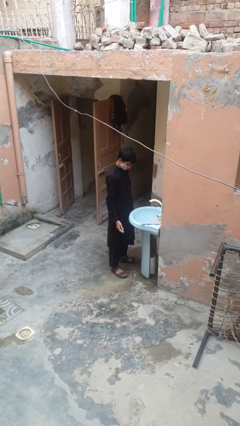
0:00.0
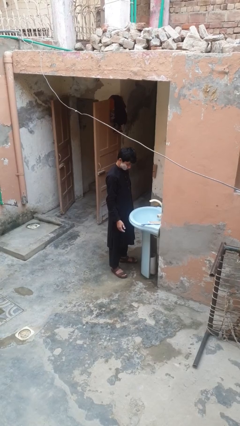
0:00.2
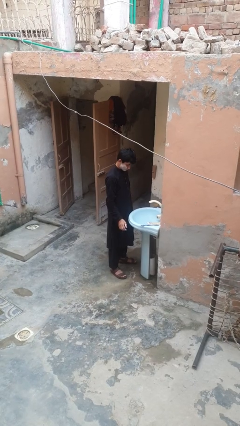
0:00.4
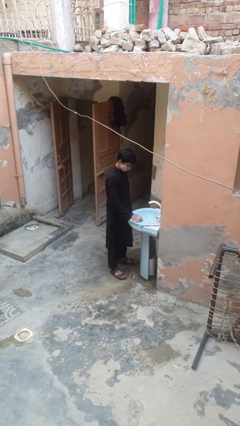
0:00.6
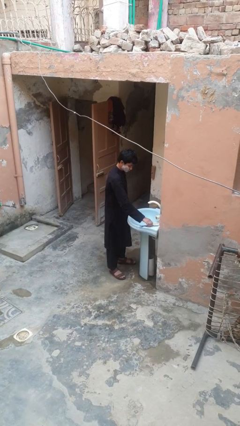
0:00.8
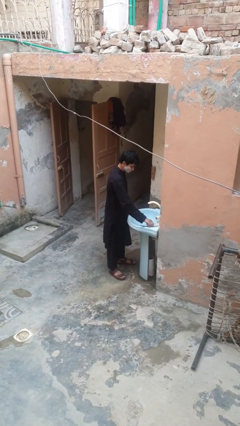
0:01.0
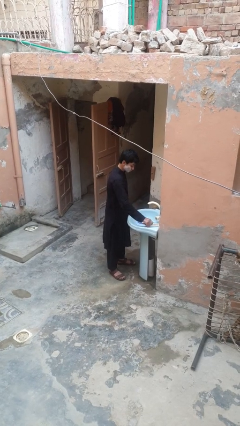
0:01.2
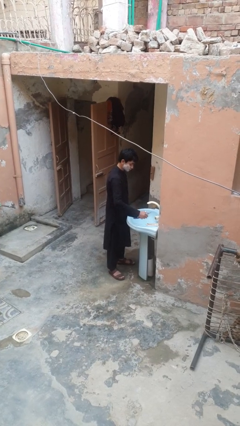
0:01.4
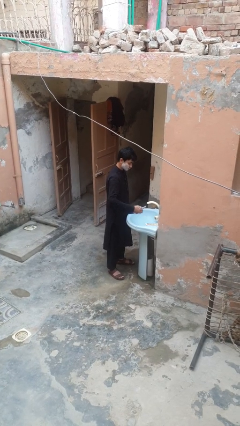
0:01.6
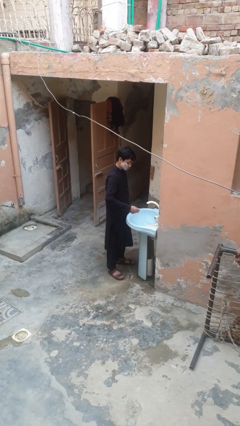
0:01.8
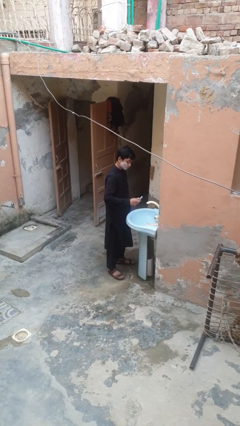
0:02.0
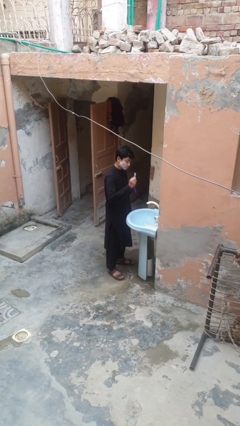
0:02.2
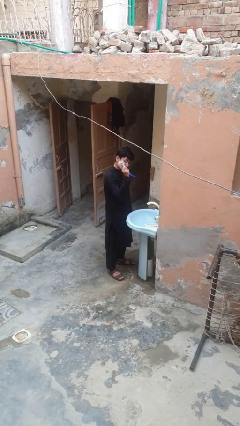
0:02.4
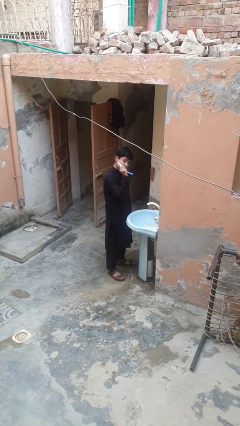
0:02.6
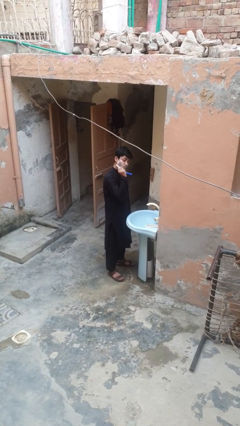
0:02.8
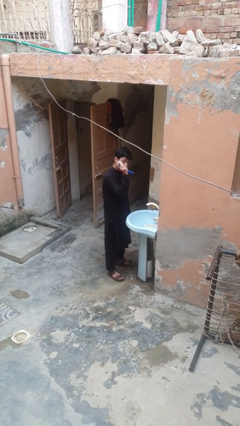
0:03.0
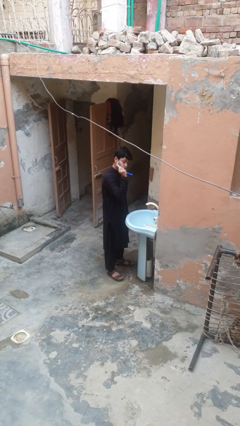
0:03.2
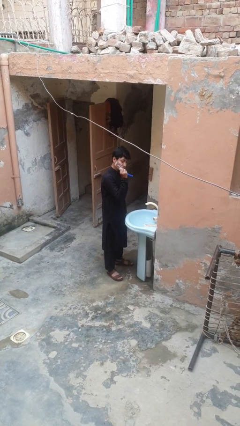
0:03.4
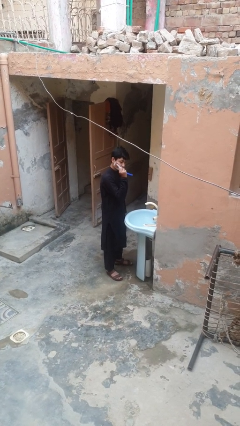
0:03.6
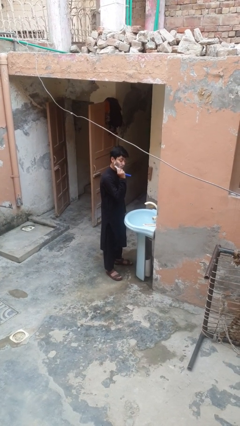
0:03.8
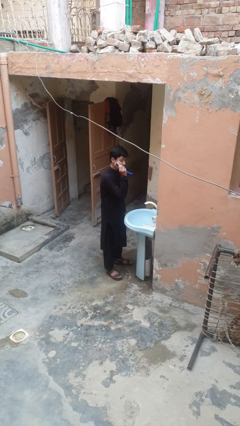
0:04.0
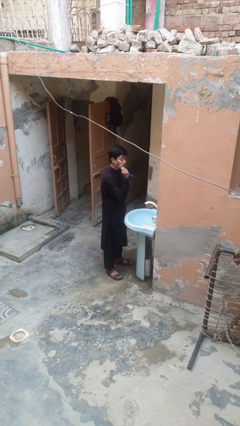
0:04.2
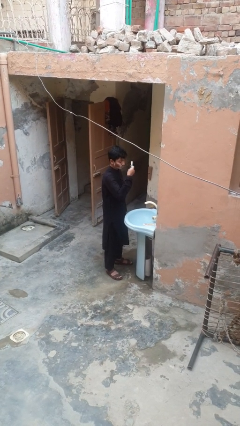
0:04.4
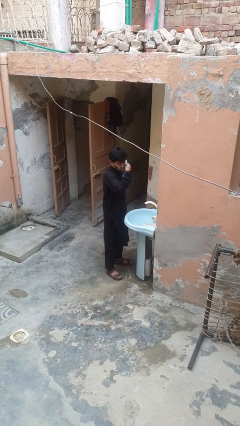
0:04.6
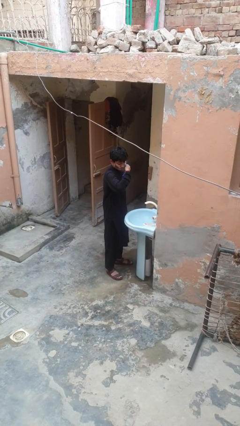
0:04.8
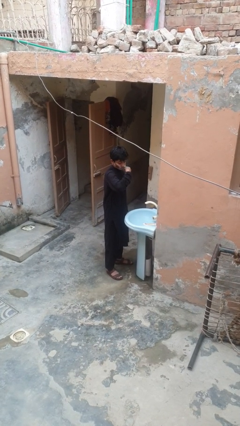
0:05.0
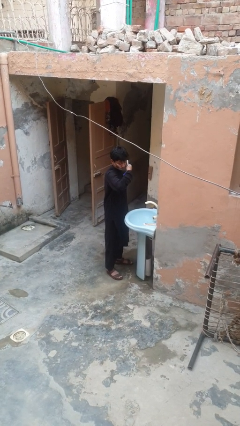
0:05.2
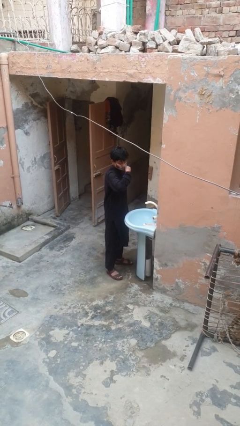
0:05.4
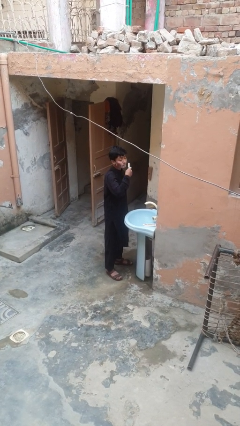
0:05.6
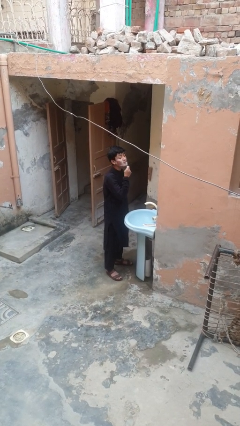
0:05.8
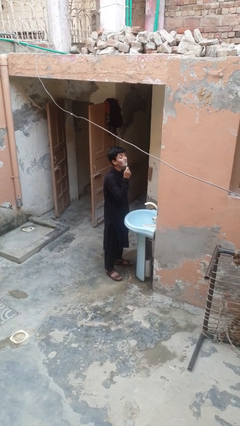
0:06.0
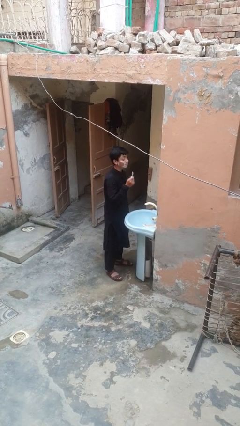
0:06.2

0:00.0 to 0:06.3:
person shaves face

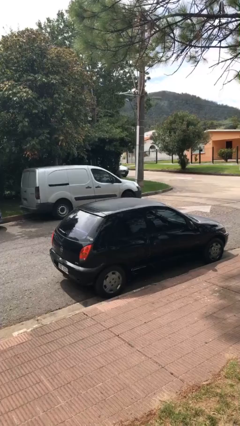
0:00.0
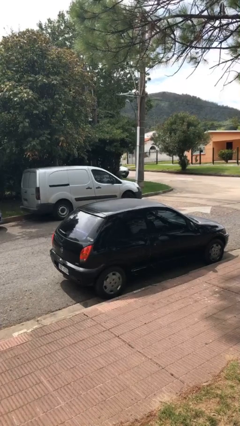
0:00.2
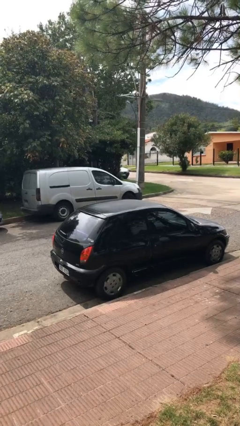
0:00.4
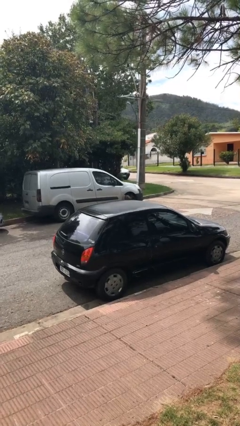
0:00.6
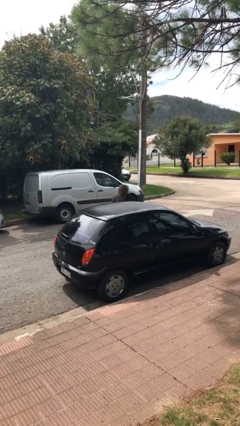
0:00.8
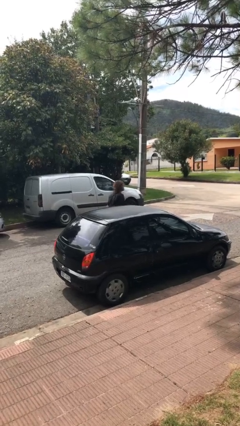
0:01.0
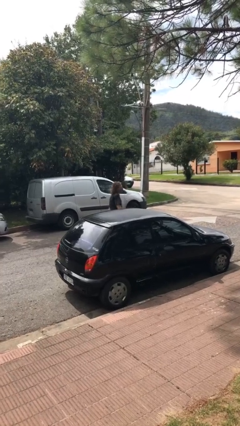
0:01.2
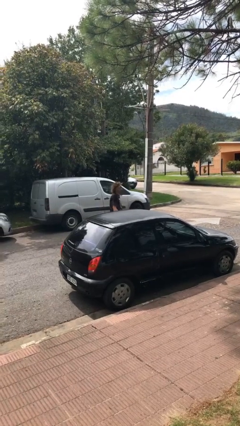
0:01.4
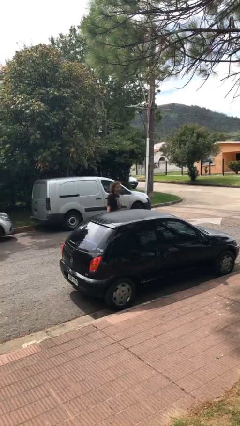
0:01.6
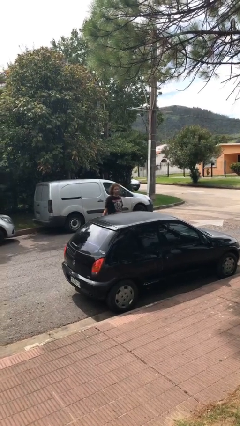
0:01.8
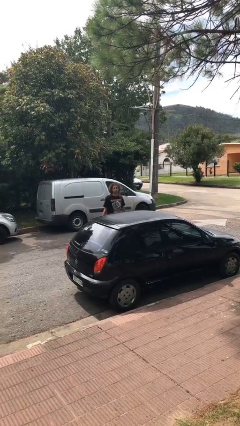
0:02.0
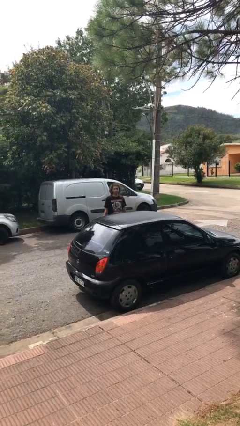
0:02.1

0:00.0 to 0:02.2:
person exits car

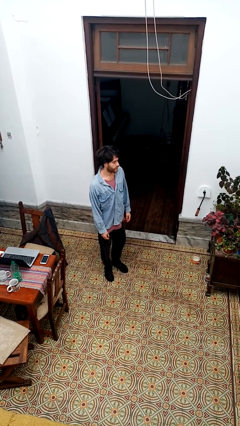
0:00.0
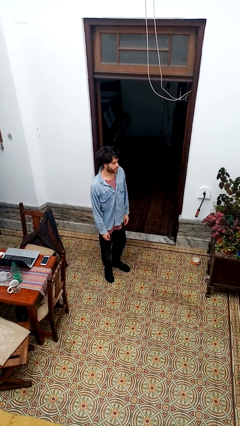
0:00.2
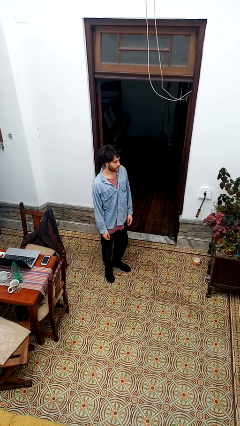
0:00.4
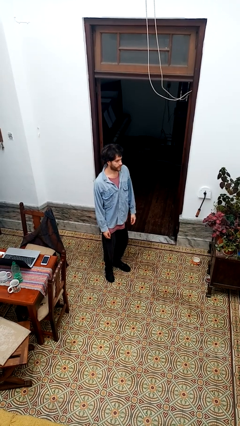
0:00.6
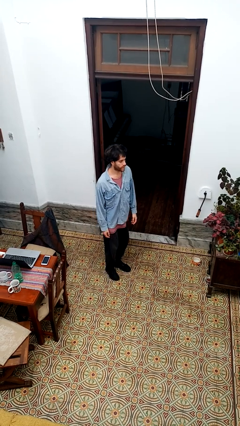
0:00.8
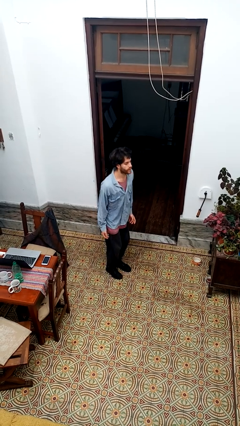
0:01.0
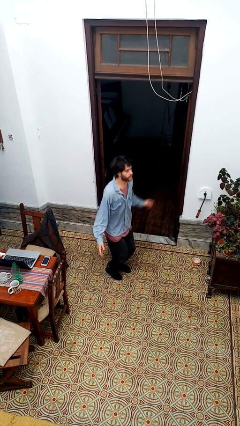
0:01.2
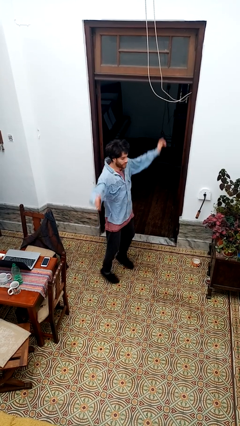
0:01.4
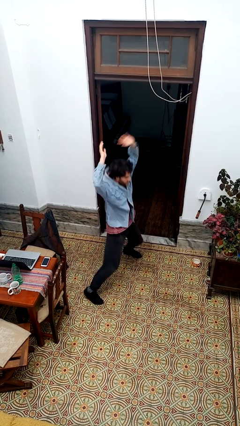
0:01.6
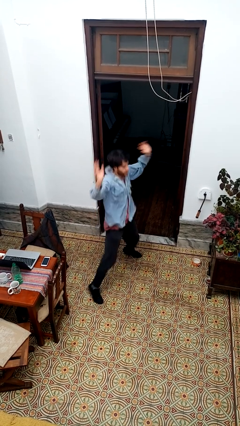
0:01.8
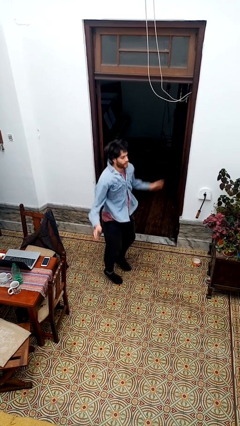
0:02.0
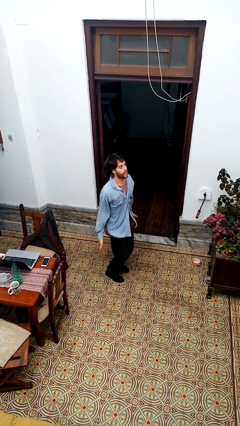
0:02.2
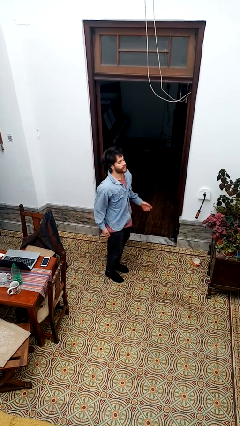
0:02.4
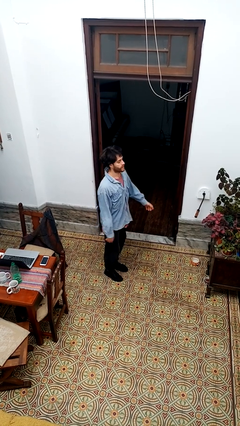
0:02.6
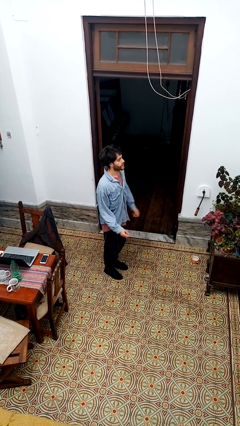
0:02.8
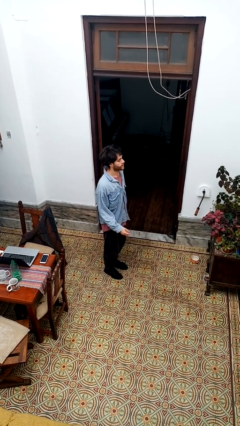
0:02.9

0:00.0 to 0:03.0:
person exercises with jumping jacks

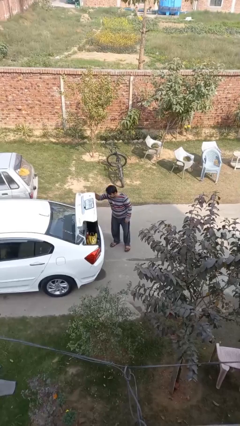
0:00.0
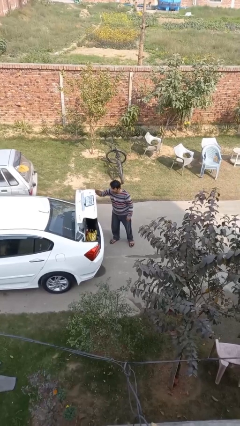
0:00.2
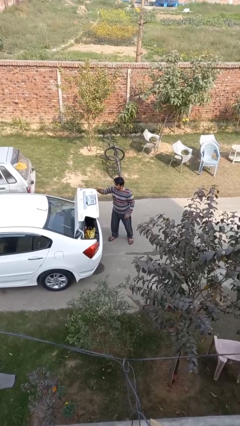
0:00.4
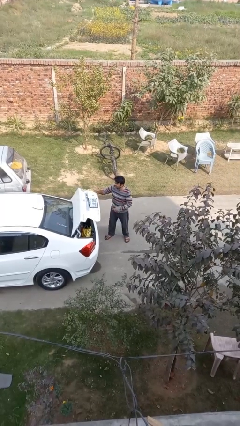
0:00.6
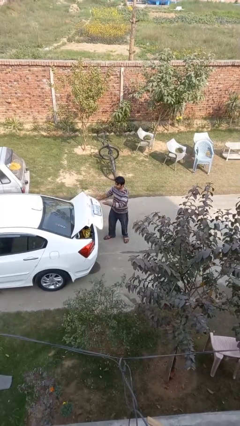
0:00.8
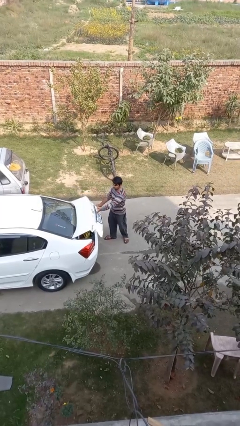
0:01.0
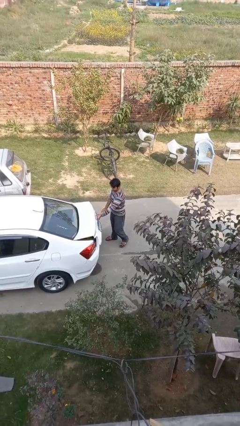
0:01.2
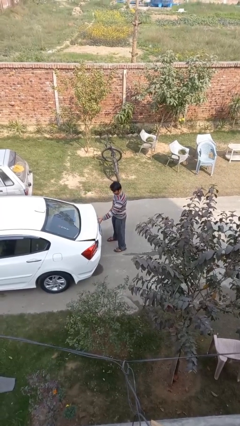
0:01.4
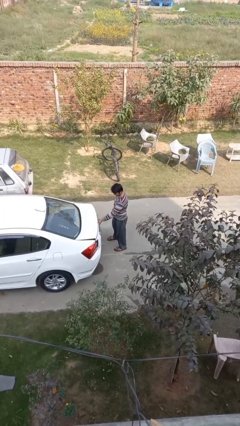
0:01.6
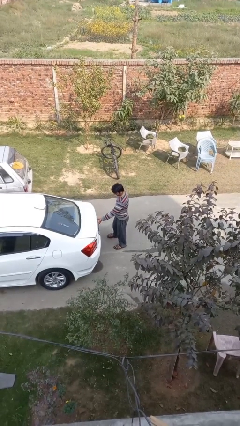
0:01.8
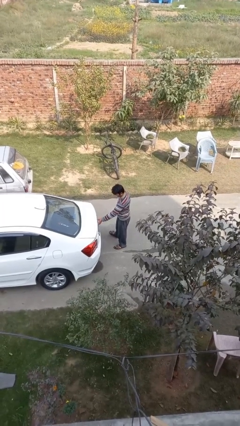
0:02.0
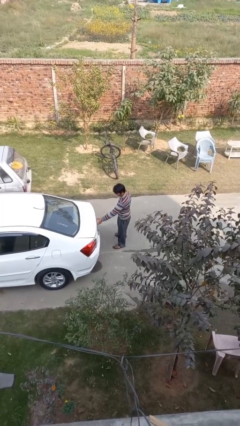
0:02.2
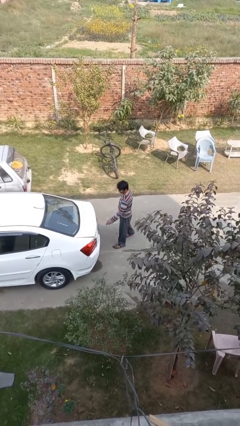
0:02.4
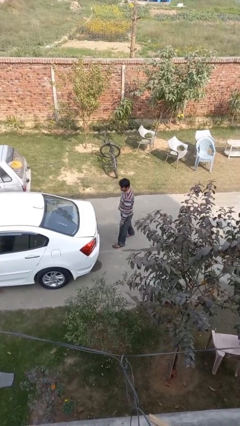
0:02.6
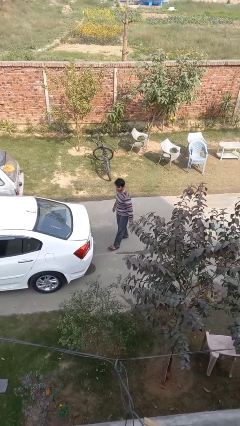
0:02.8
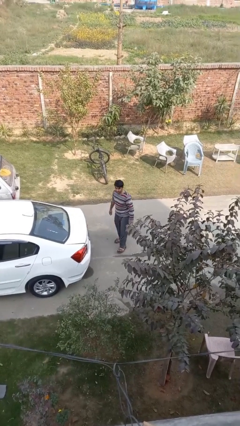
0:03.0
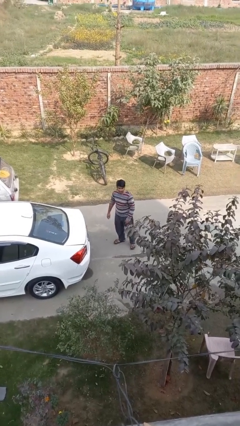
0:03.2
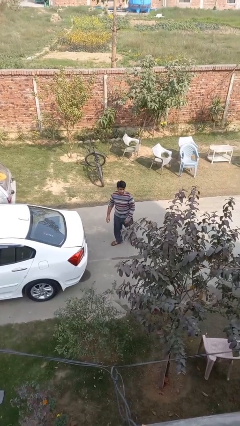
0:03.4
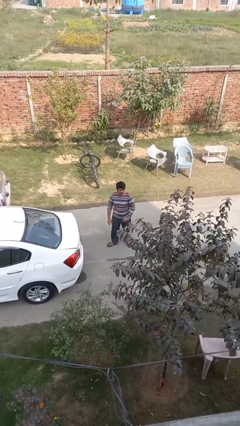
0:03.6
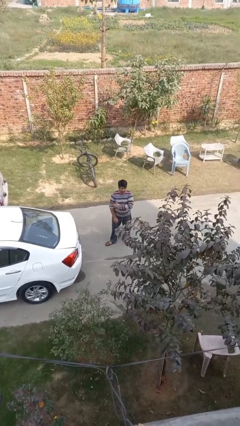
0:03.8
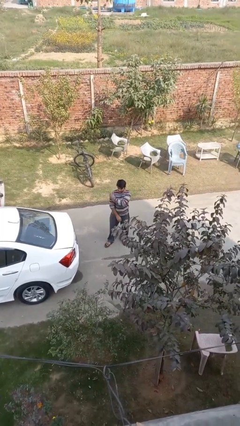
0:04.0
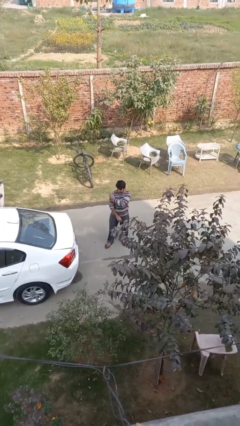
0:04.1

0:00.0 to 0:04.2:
person closes car trunk

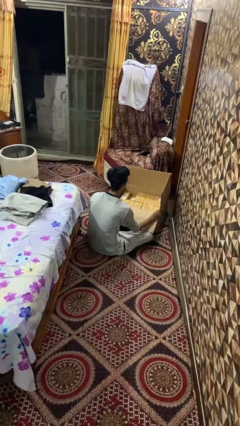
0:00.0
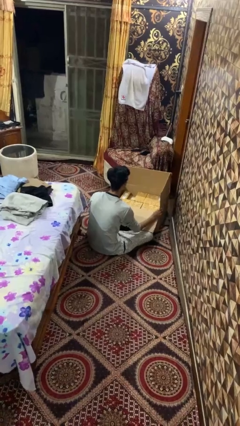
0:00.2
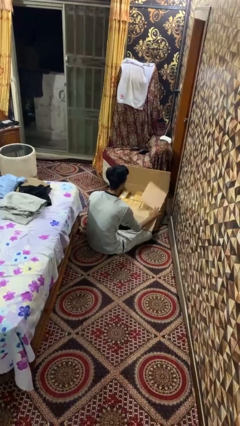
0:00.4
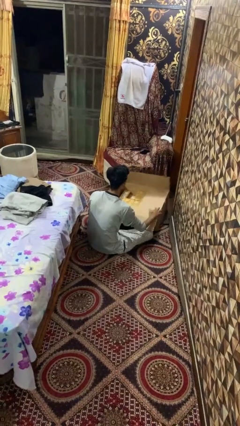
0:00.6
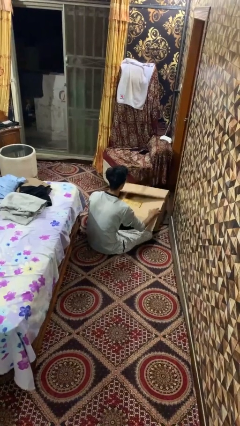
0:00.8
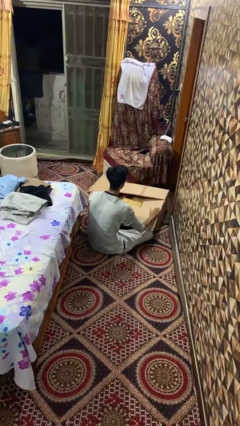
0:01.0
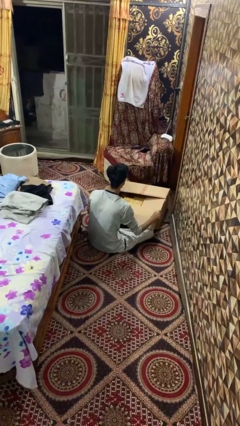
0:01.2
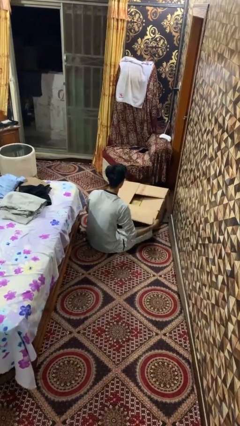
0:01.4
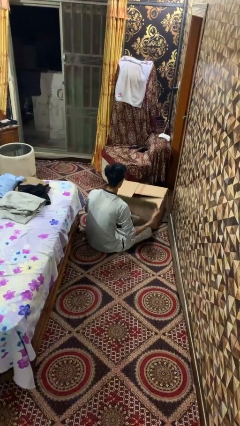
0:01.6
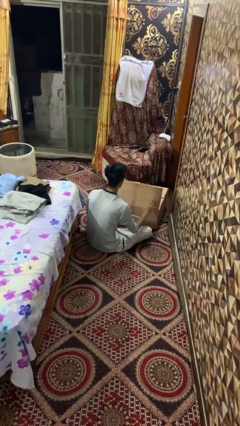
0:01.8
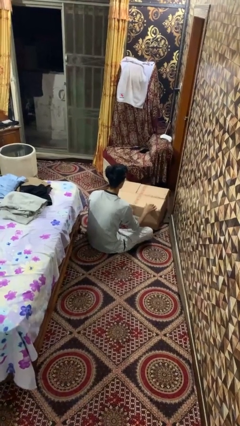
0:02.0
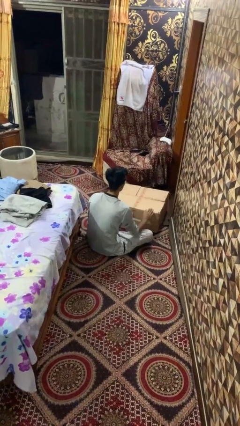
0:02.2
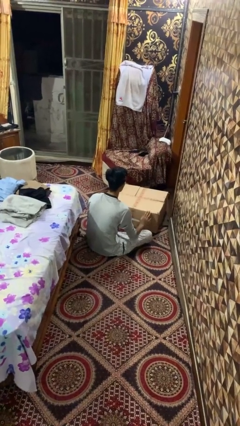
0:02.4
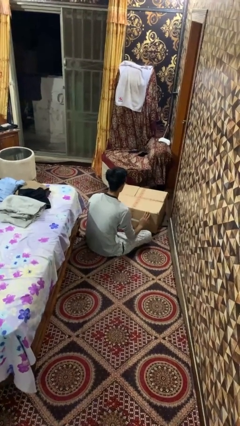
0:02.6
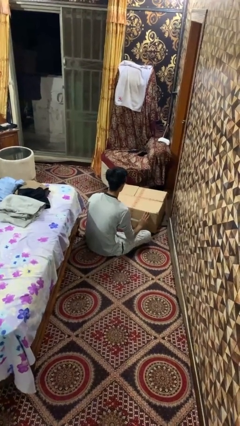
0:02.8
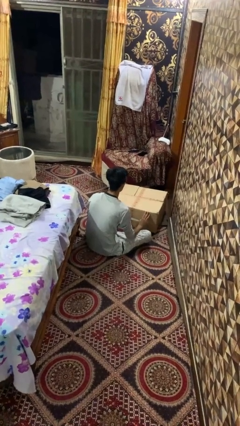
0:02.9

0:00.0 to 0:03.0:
person closes box
